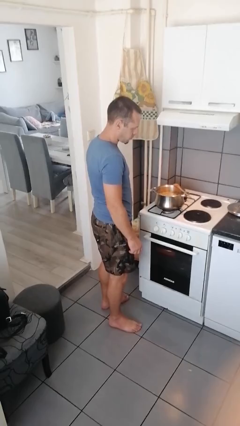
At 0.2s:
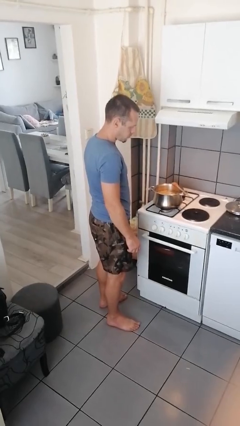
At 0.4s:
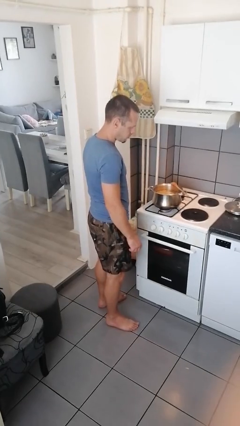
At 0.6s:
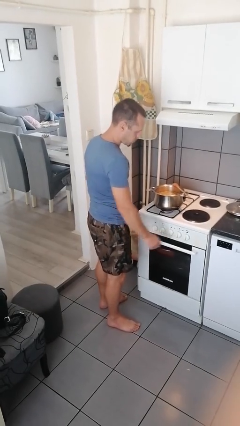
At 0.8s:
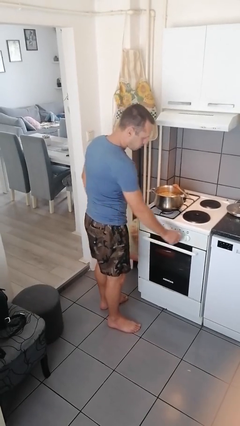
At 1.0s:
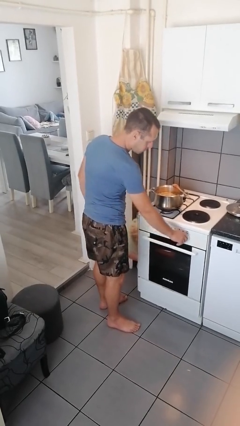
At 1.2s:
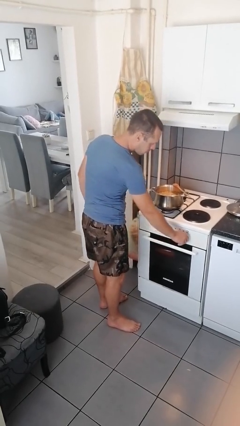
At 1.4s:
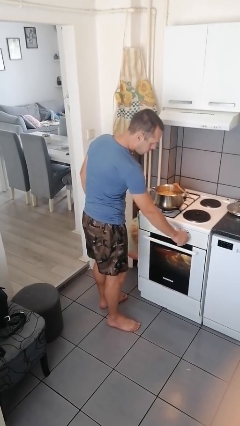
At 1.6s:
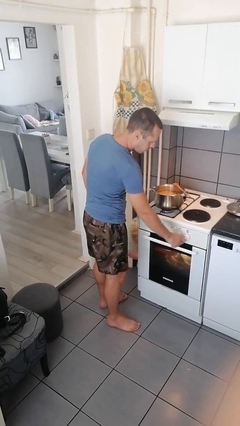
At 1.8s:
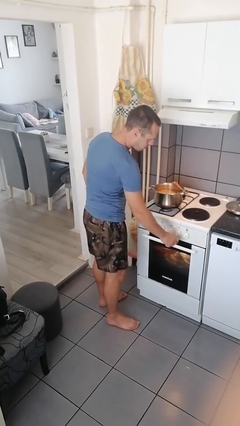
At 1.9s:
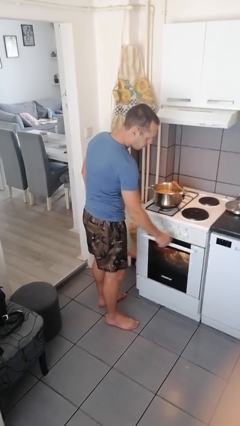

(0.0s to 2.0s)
person turns on stovetop

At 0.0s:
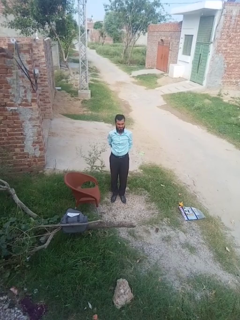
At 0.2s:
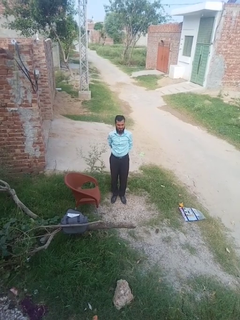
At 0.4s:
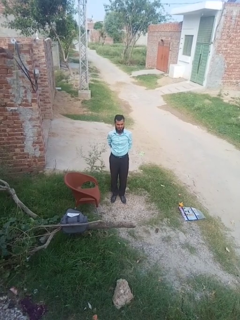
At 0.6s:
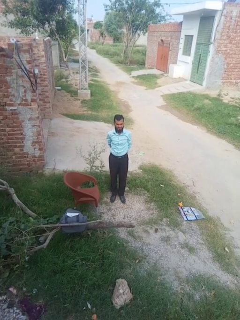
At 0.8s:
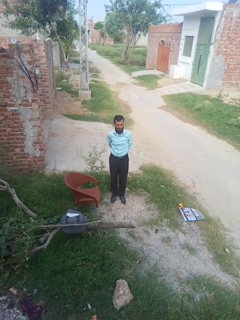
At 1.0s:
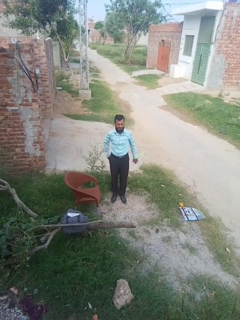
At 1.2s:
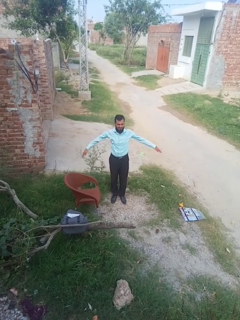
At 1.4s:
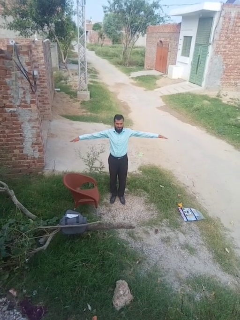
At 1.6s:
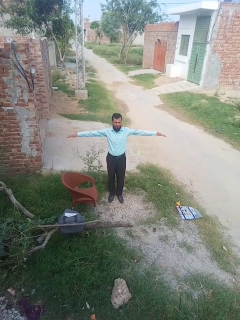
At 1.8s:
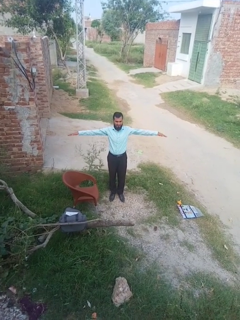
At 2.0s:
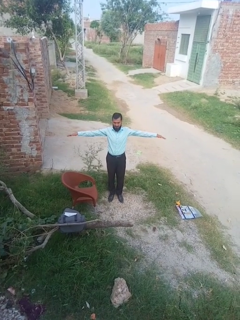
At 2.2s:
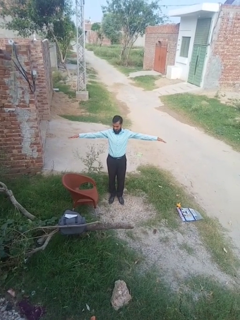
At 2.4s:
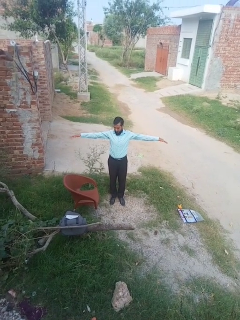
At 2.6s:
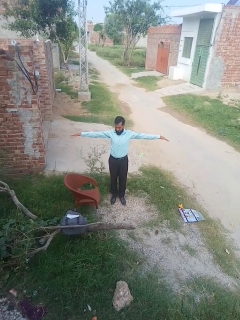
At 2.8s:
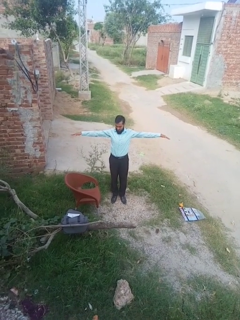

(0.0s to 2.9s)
person stretches arms to side

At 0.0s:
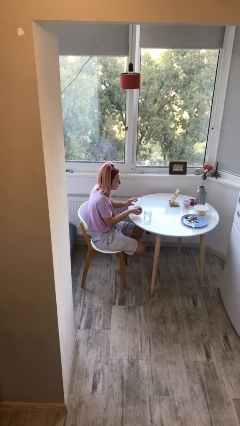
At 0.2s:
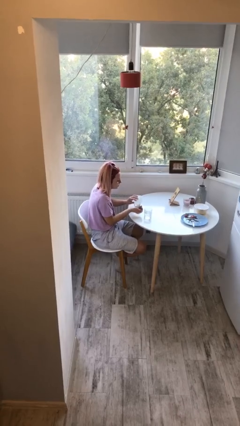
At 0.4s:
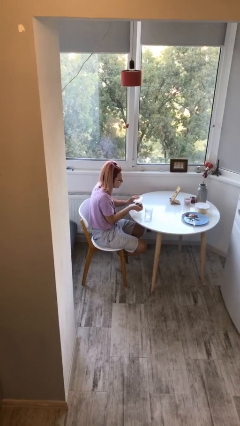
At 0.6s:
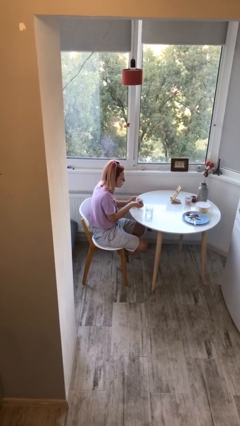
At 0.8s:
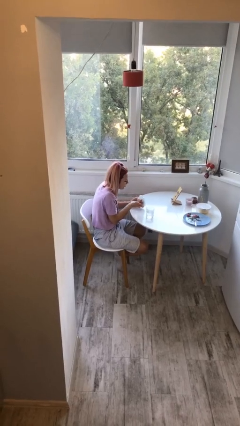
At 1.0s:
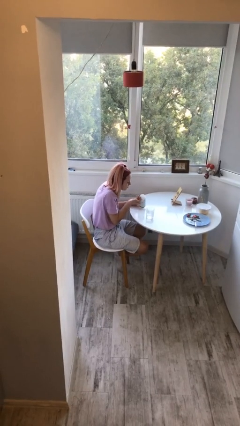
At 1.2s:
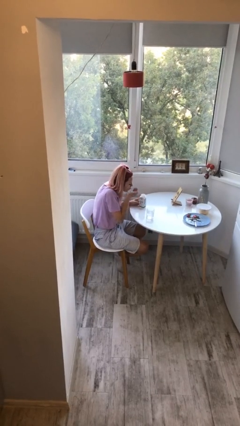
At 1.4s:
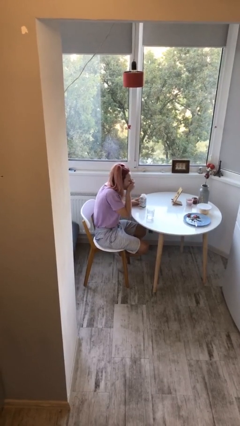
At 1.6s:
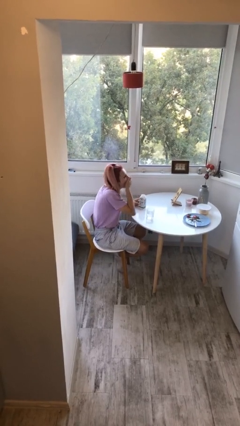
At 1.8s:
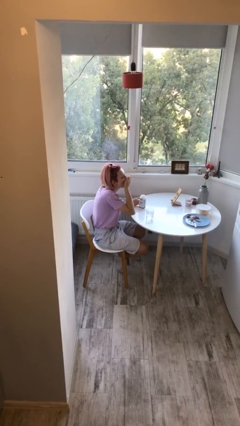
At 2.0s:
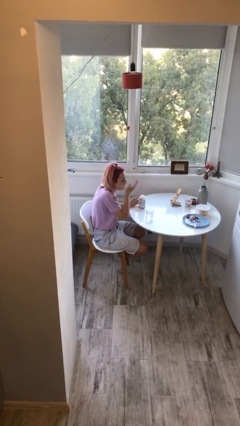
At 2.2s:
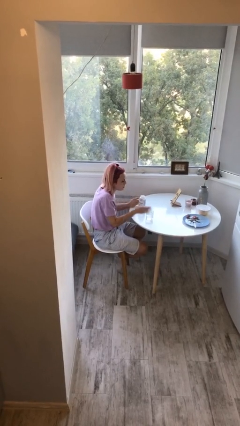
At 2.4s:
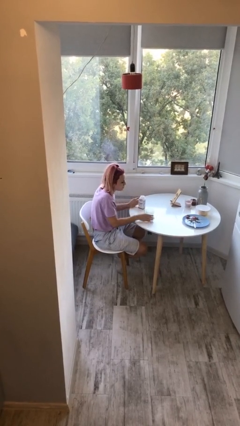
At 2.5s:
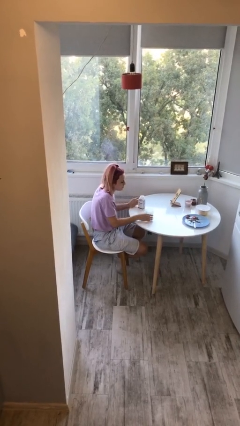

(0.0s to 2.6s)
person takes medicine pills

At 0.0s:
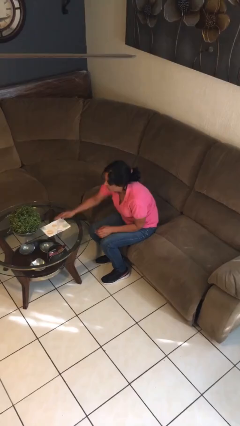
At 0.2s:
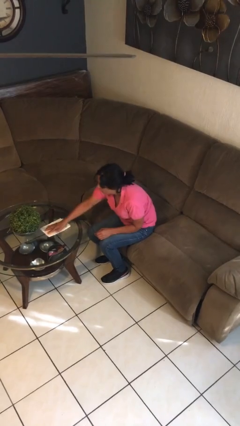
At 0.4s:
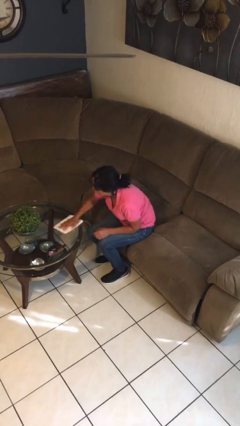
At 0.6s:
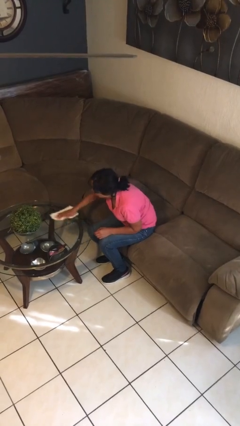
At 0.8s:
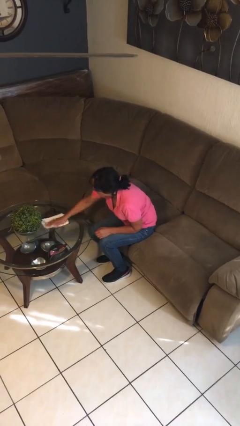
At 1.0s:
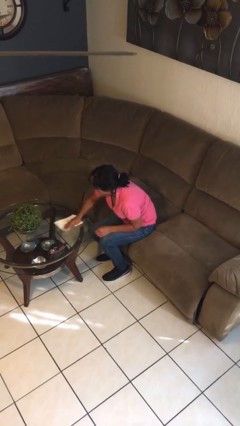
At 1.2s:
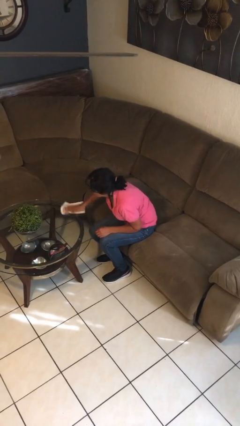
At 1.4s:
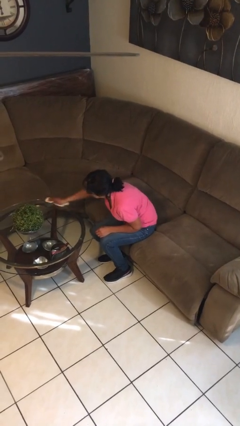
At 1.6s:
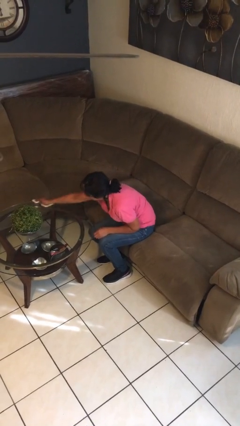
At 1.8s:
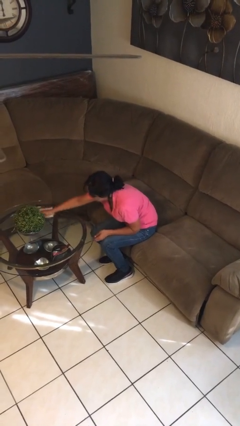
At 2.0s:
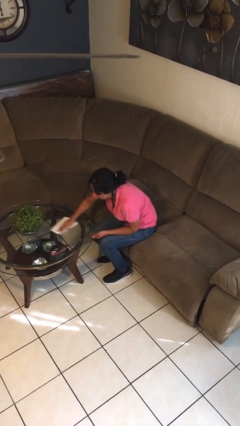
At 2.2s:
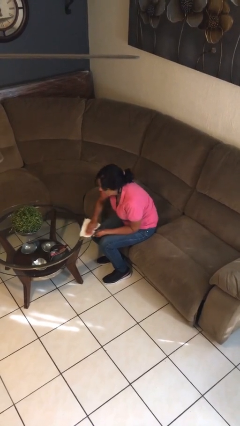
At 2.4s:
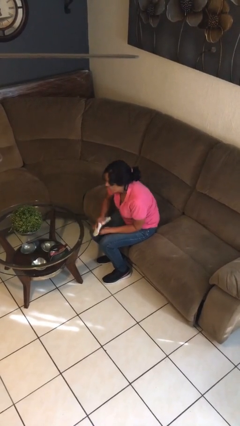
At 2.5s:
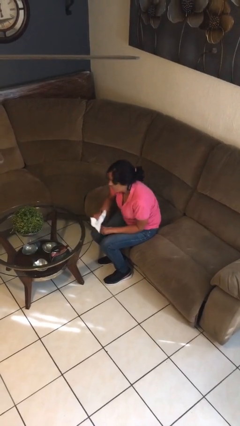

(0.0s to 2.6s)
person cleans table with rag

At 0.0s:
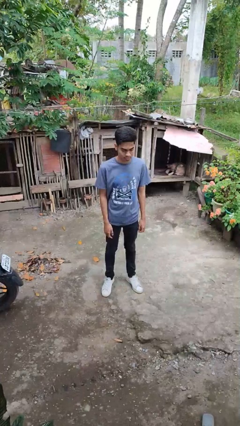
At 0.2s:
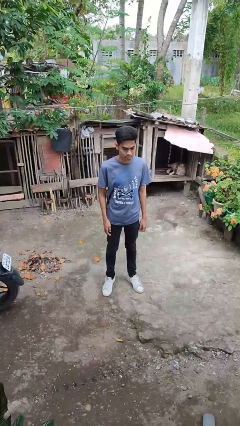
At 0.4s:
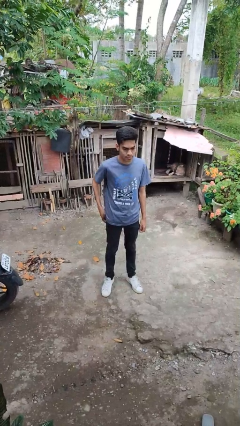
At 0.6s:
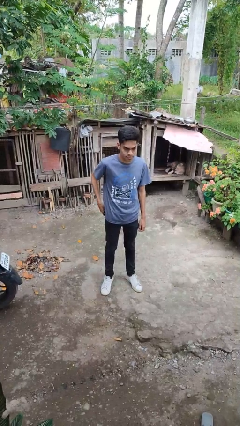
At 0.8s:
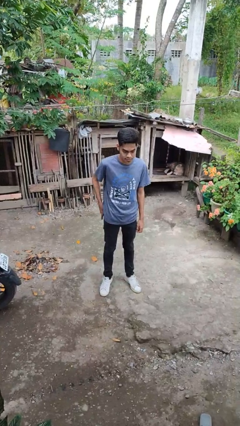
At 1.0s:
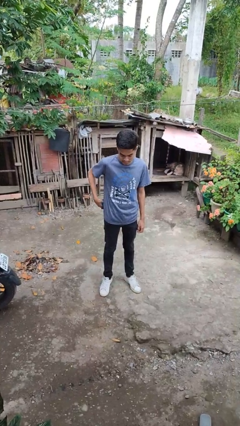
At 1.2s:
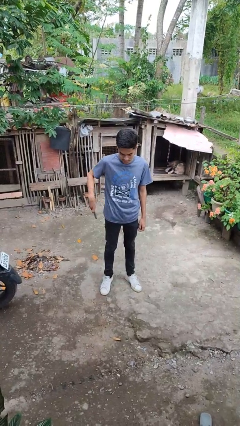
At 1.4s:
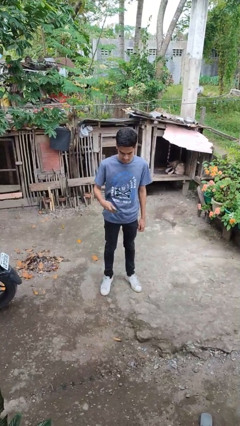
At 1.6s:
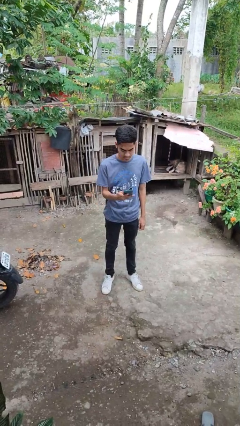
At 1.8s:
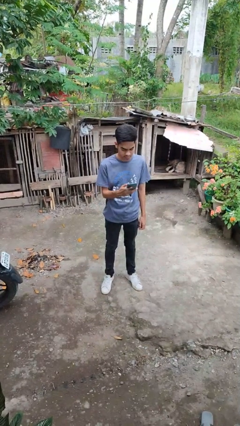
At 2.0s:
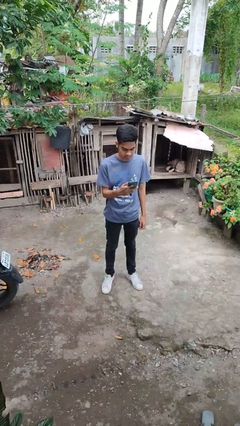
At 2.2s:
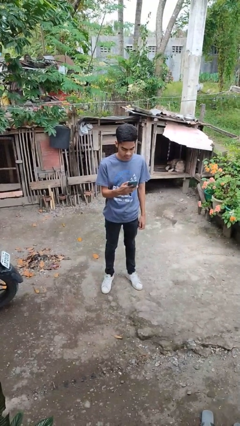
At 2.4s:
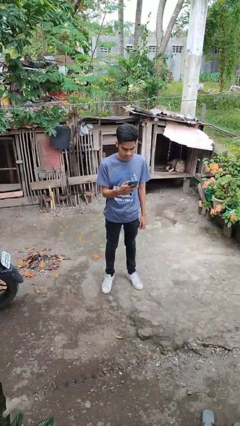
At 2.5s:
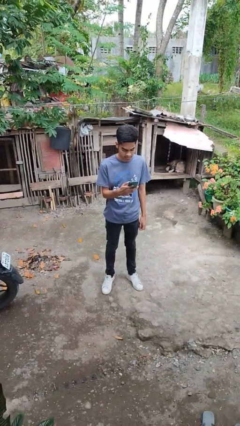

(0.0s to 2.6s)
person takes phone from pocket

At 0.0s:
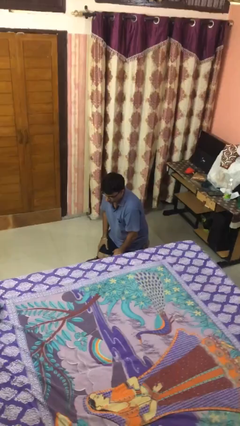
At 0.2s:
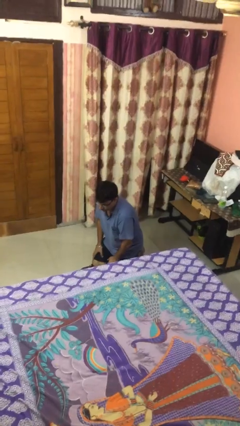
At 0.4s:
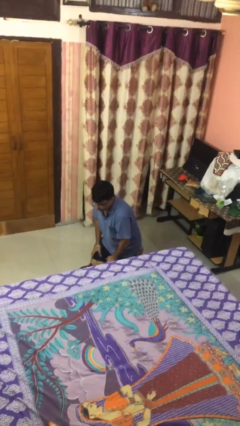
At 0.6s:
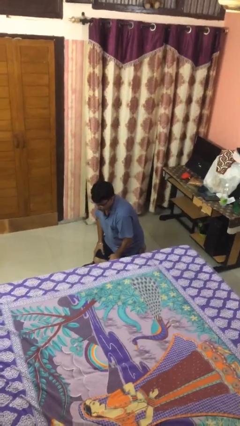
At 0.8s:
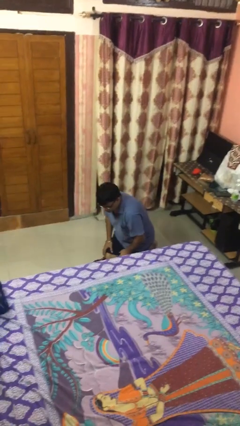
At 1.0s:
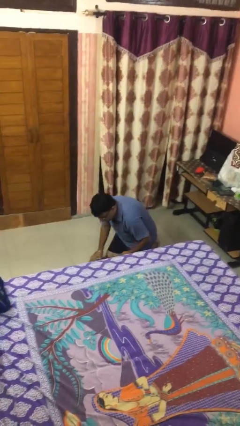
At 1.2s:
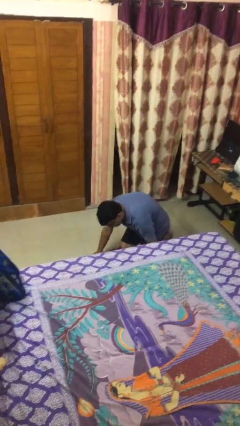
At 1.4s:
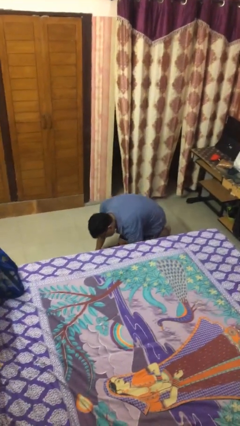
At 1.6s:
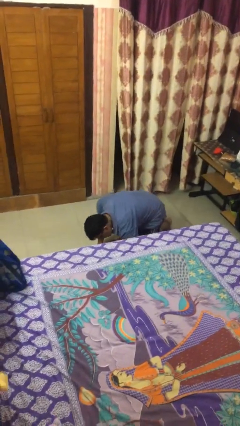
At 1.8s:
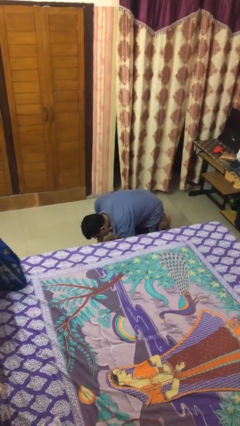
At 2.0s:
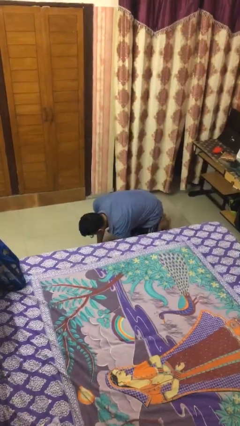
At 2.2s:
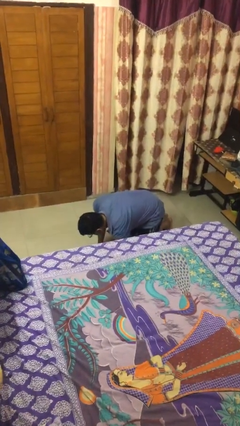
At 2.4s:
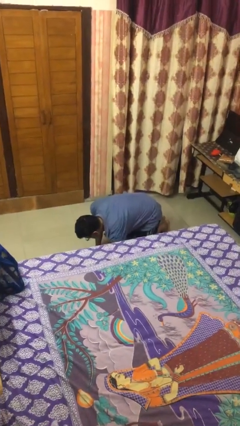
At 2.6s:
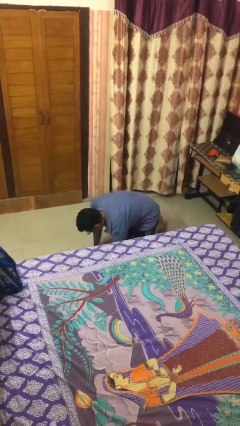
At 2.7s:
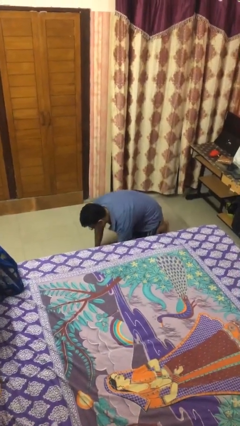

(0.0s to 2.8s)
person searches under bed

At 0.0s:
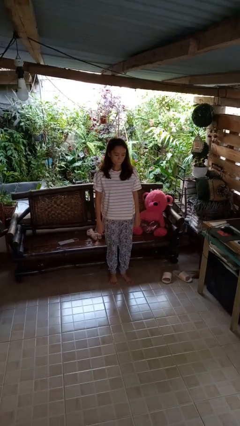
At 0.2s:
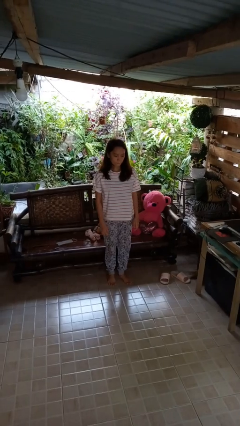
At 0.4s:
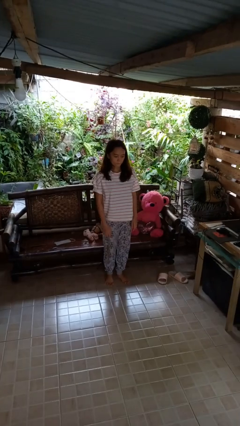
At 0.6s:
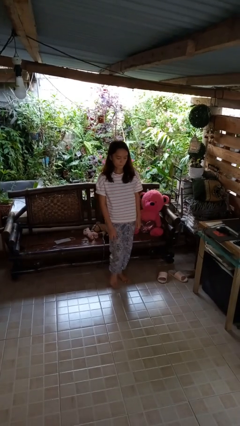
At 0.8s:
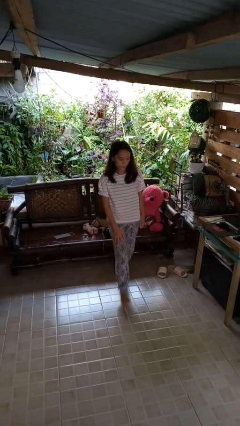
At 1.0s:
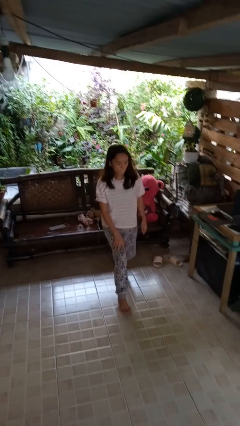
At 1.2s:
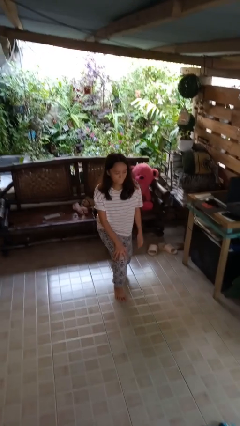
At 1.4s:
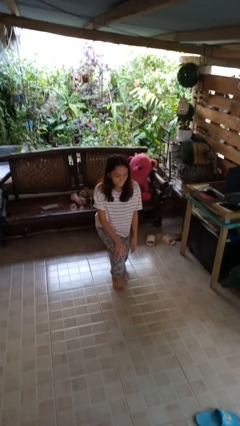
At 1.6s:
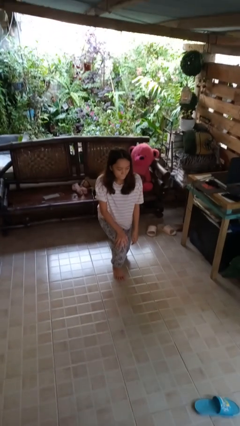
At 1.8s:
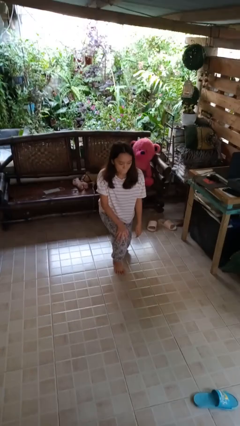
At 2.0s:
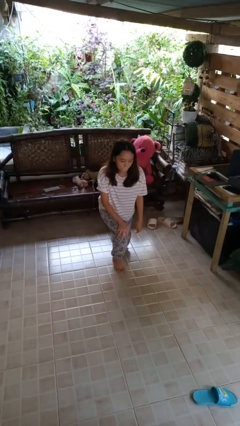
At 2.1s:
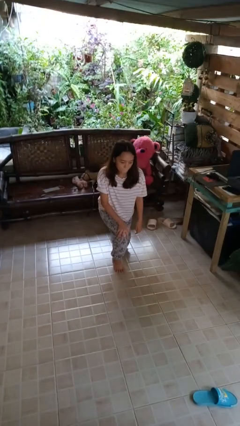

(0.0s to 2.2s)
person kneels

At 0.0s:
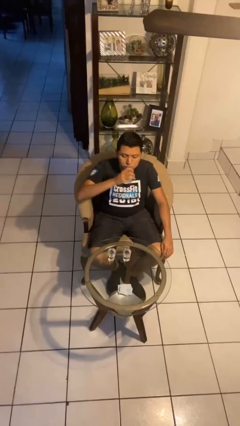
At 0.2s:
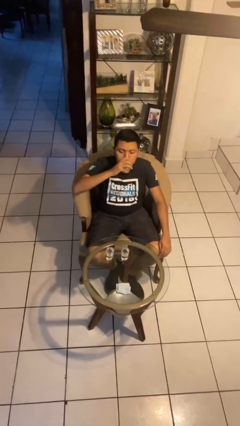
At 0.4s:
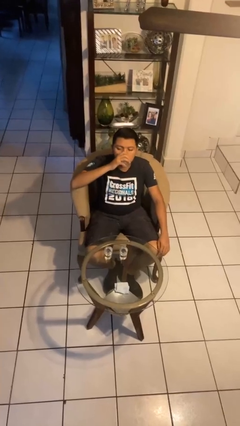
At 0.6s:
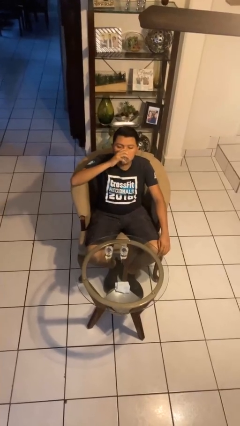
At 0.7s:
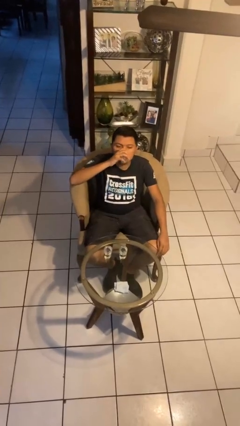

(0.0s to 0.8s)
person drinks from shotglass
